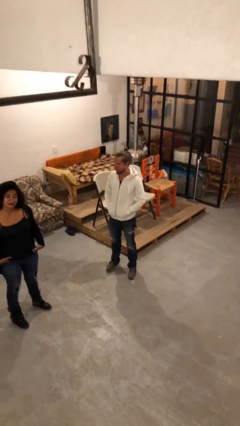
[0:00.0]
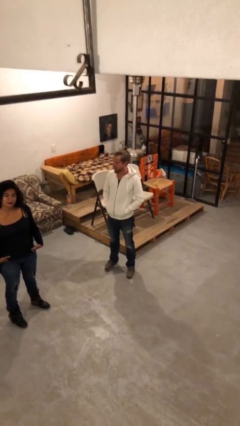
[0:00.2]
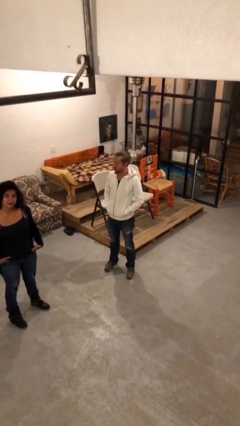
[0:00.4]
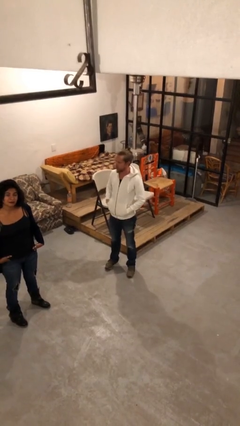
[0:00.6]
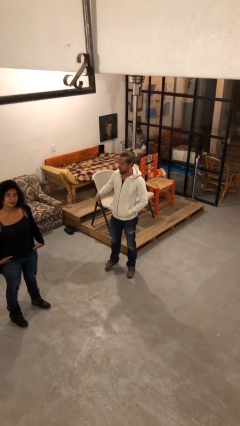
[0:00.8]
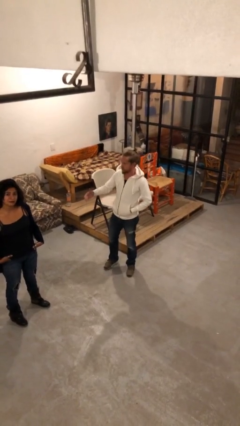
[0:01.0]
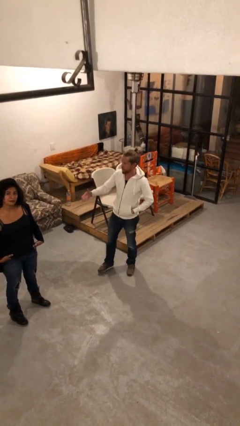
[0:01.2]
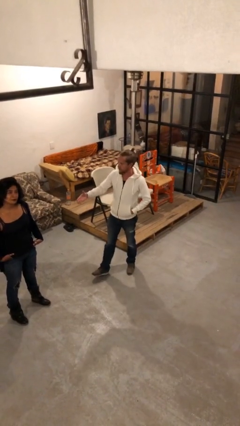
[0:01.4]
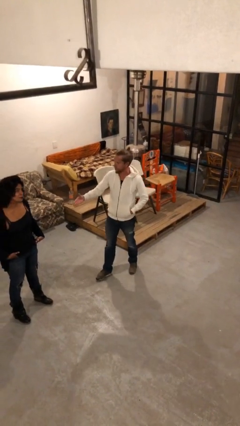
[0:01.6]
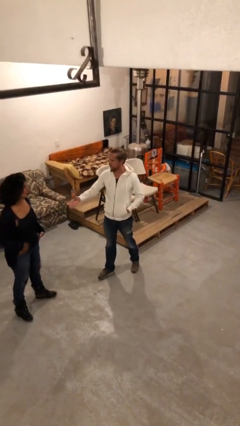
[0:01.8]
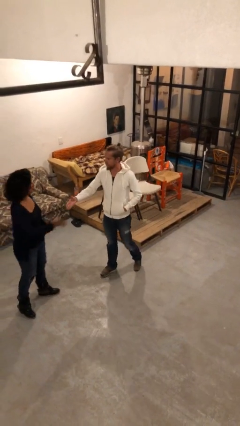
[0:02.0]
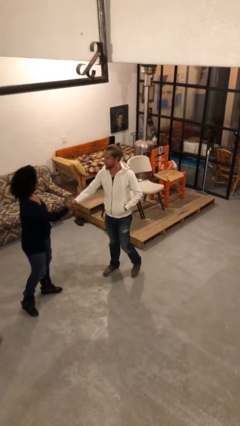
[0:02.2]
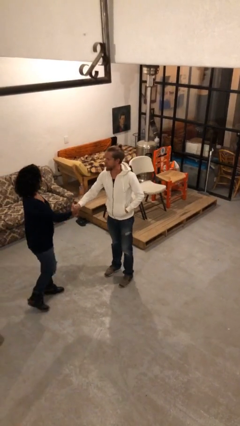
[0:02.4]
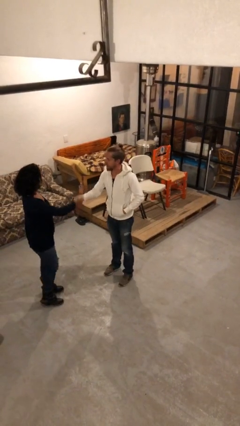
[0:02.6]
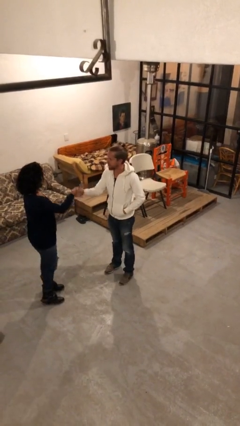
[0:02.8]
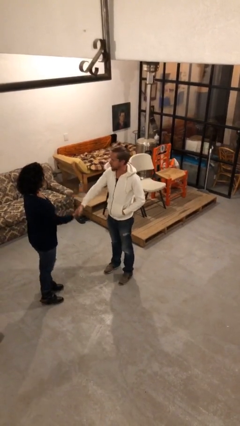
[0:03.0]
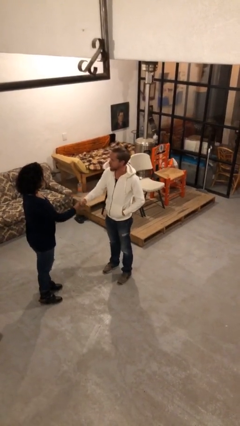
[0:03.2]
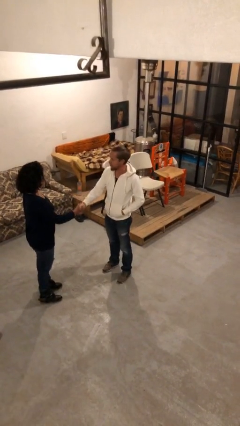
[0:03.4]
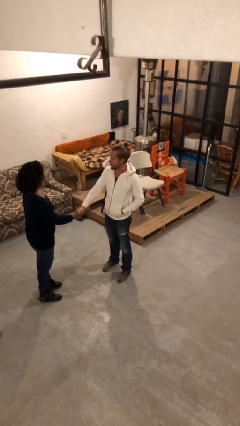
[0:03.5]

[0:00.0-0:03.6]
person shakes hand

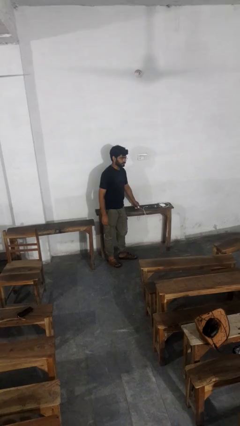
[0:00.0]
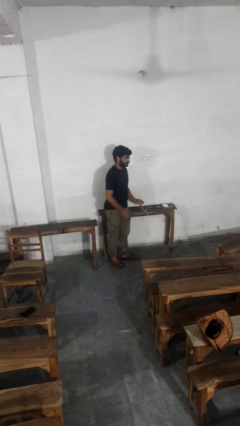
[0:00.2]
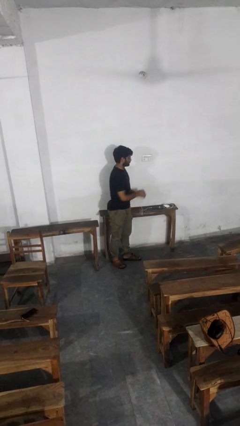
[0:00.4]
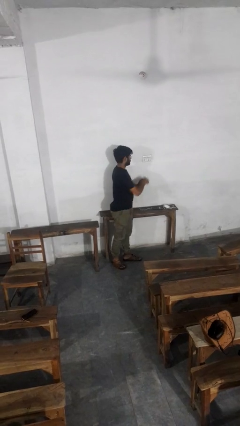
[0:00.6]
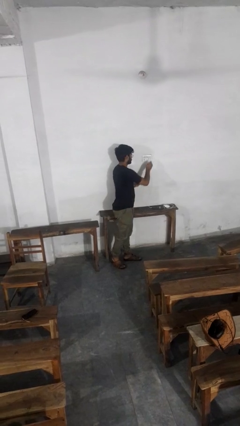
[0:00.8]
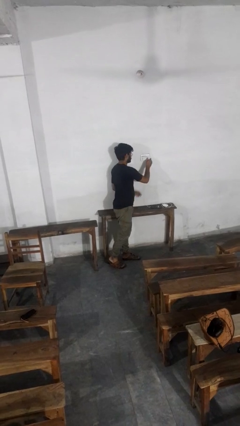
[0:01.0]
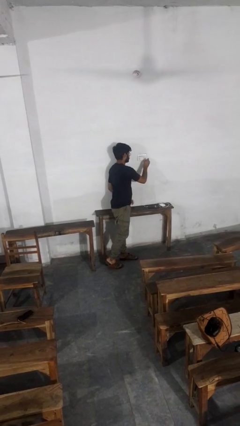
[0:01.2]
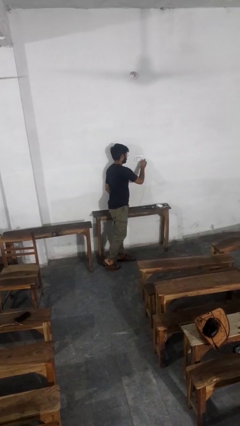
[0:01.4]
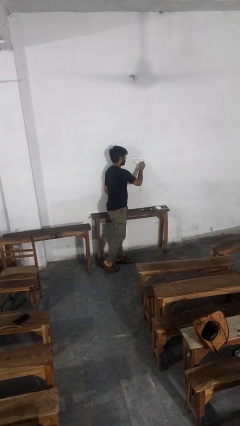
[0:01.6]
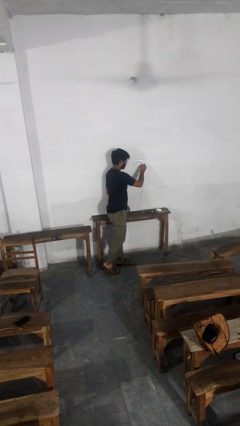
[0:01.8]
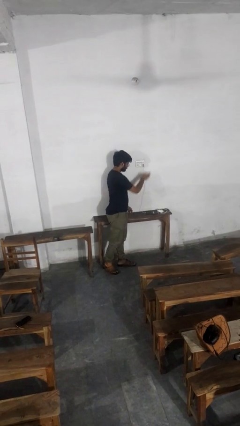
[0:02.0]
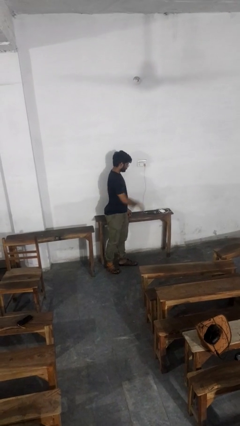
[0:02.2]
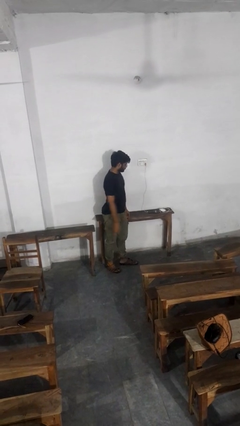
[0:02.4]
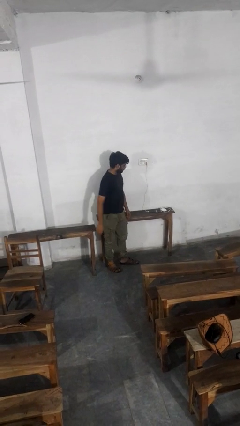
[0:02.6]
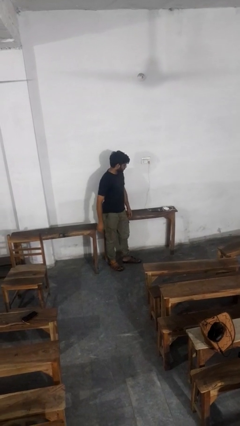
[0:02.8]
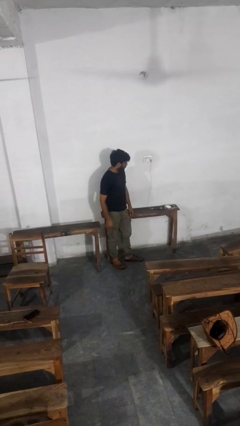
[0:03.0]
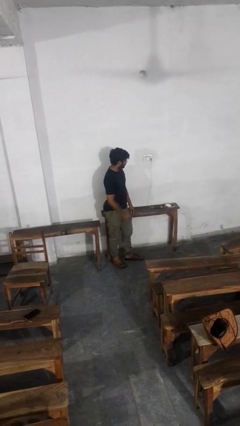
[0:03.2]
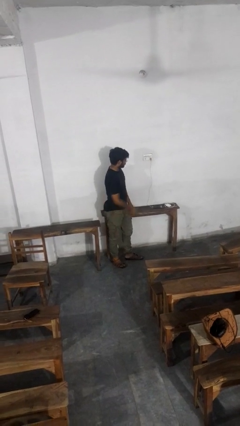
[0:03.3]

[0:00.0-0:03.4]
person plugs into electrical socket

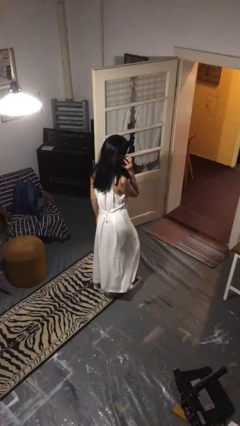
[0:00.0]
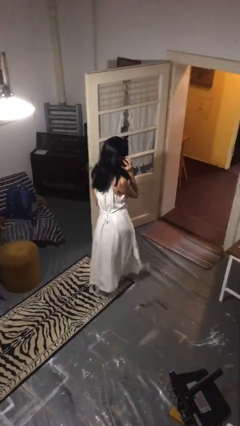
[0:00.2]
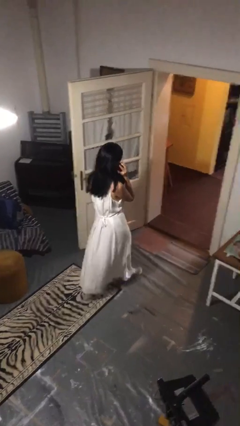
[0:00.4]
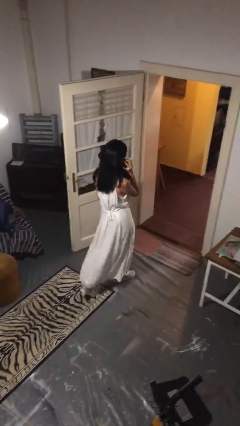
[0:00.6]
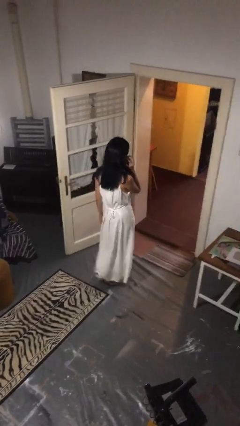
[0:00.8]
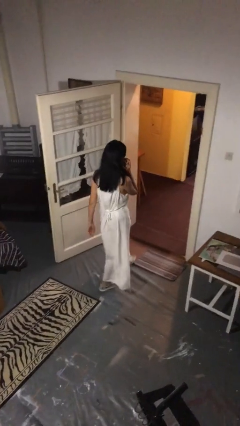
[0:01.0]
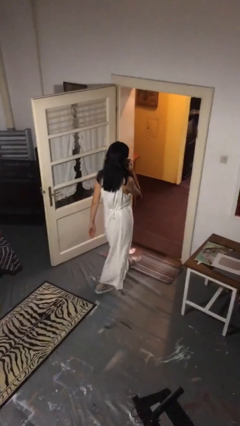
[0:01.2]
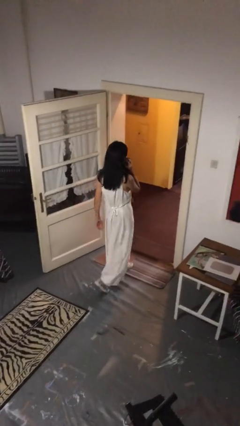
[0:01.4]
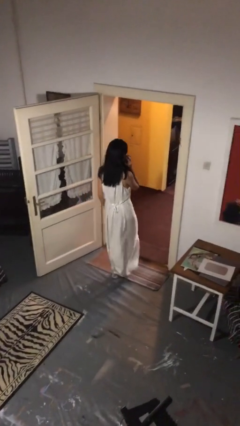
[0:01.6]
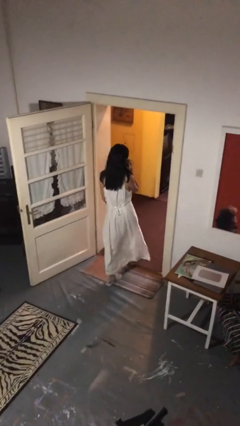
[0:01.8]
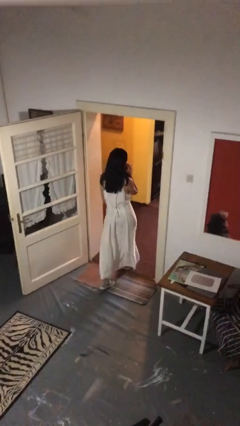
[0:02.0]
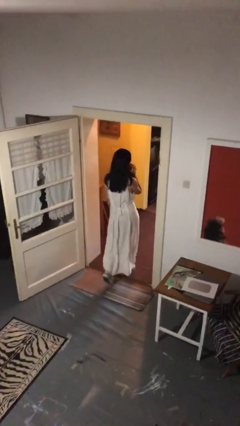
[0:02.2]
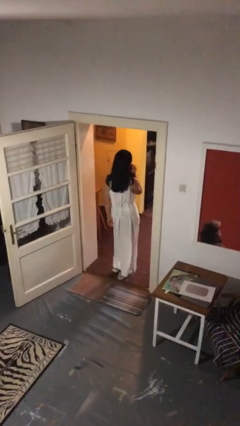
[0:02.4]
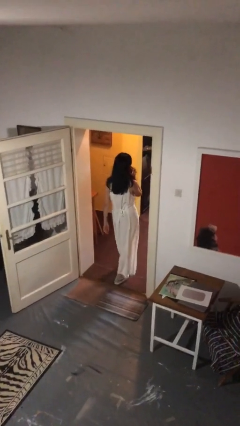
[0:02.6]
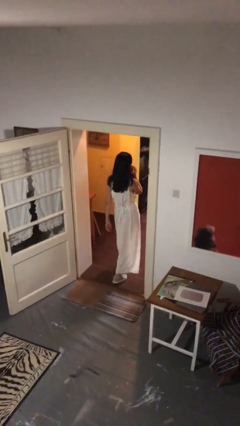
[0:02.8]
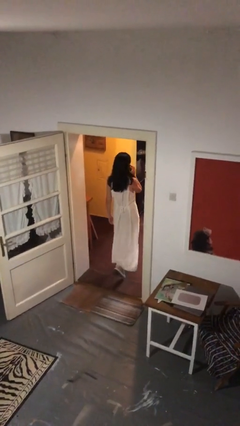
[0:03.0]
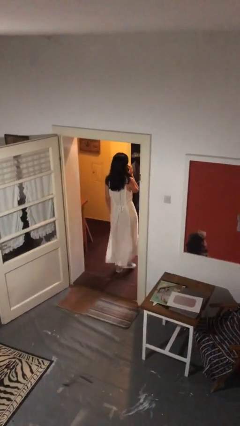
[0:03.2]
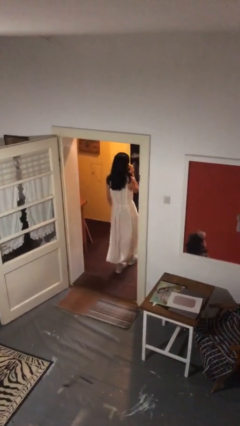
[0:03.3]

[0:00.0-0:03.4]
person exits scene through structure

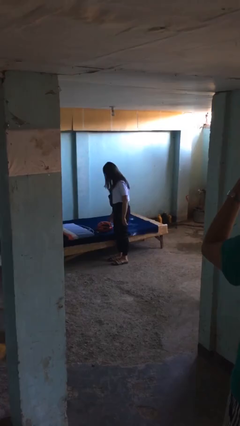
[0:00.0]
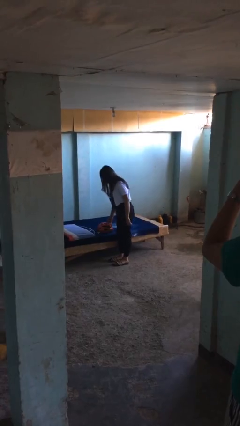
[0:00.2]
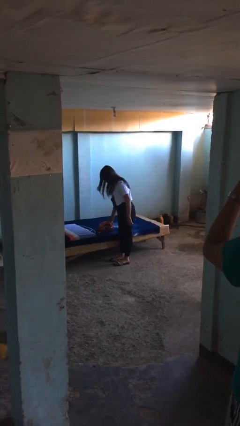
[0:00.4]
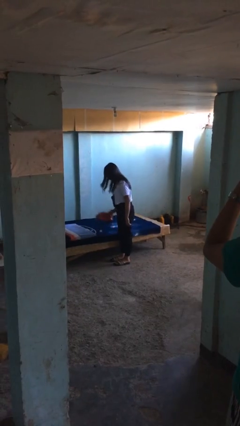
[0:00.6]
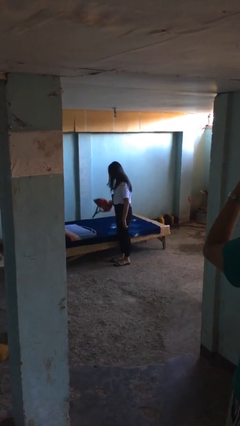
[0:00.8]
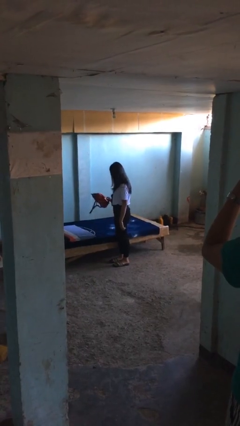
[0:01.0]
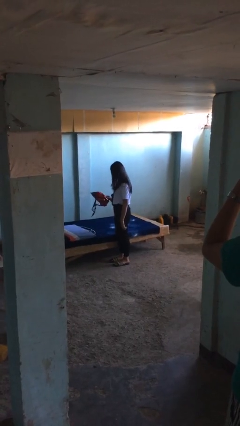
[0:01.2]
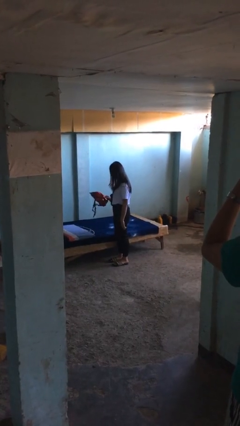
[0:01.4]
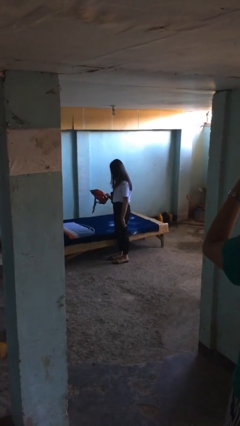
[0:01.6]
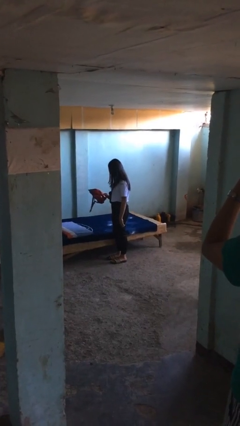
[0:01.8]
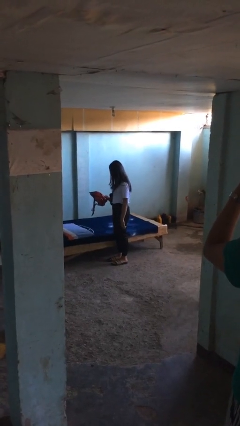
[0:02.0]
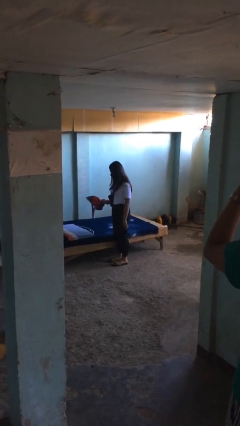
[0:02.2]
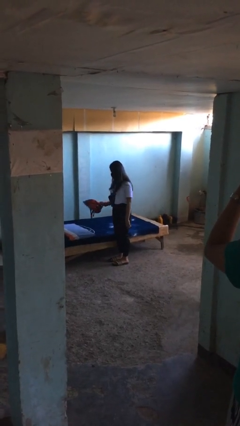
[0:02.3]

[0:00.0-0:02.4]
person picks up object from bed

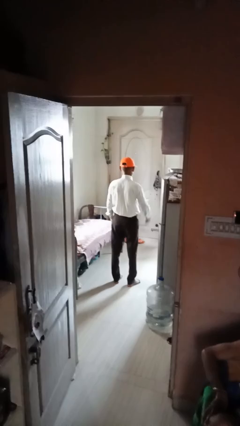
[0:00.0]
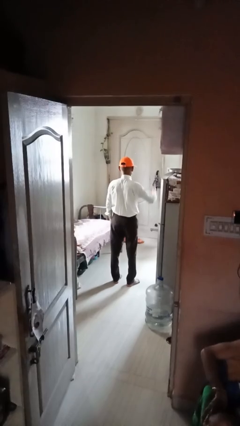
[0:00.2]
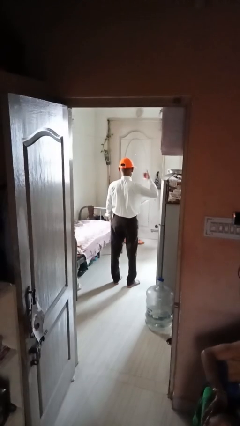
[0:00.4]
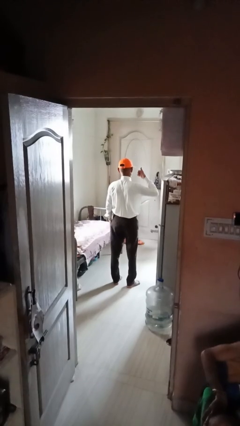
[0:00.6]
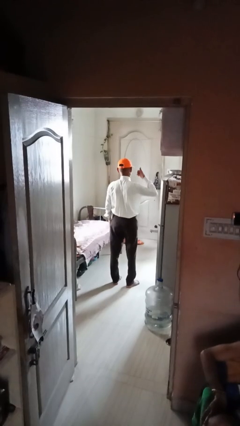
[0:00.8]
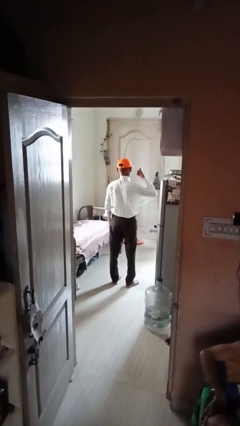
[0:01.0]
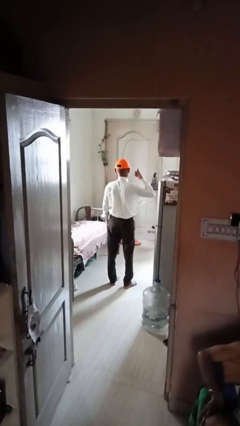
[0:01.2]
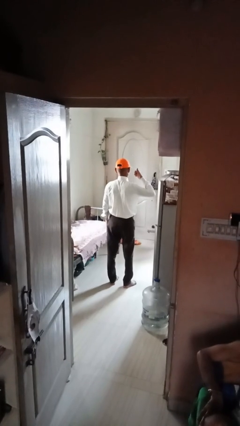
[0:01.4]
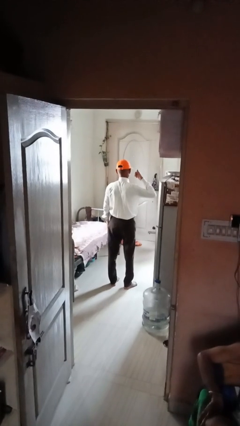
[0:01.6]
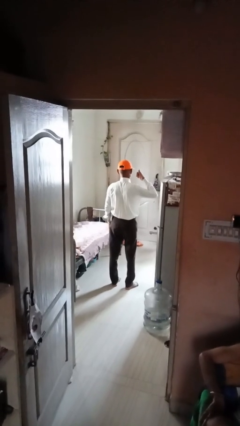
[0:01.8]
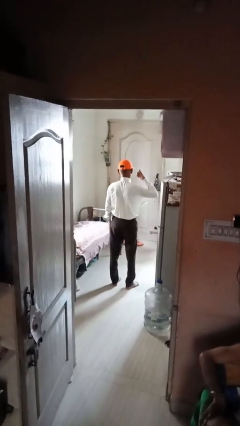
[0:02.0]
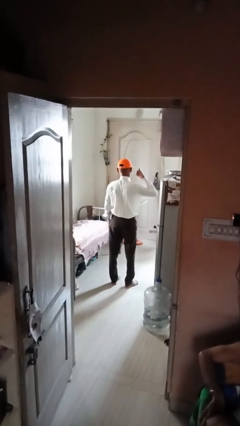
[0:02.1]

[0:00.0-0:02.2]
person gestures call me

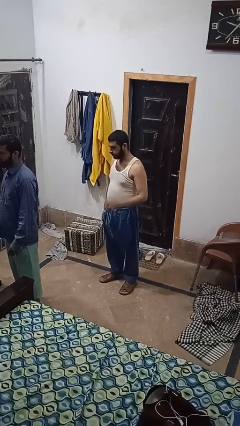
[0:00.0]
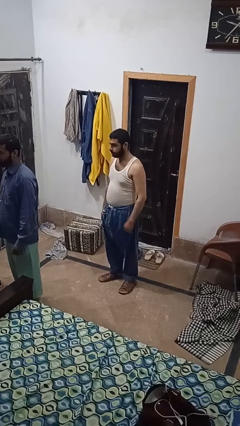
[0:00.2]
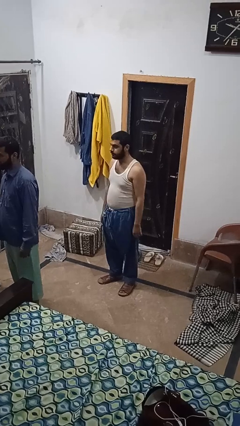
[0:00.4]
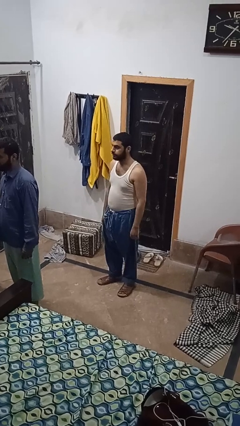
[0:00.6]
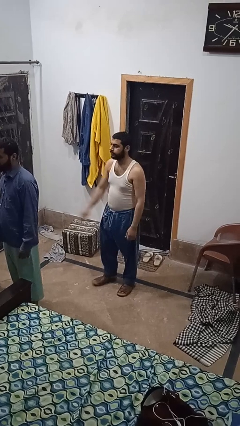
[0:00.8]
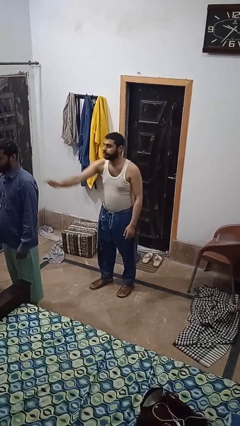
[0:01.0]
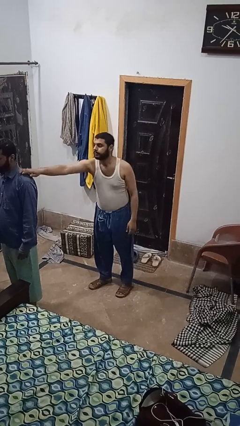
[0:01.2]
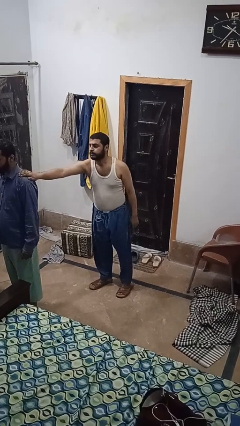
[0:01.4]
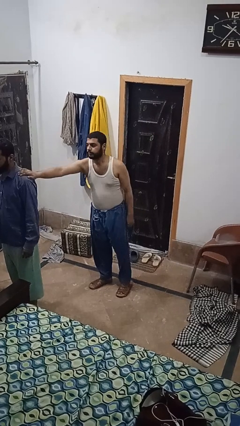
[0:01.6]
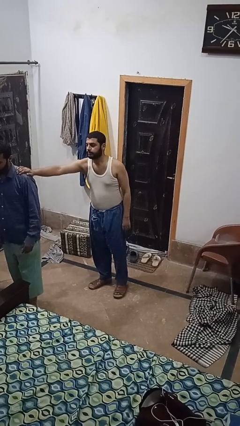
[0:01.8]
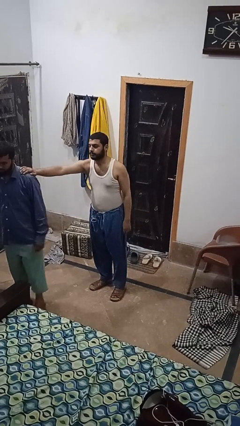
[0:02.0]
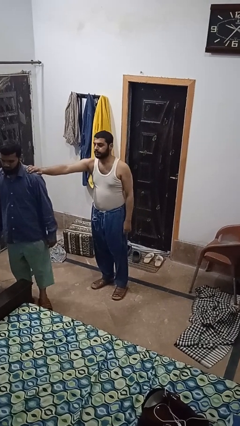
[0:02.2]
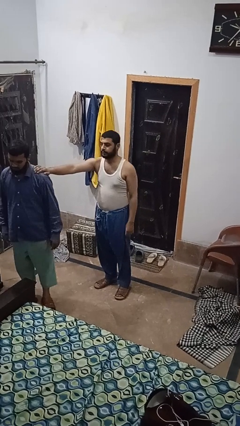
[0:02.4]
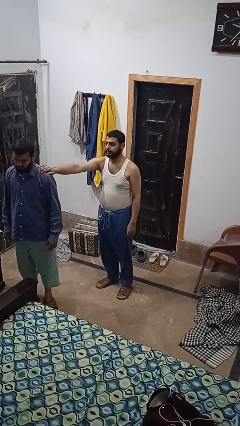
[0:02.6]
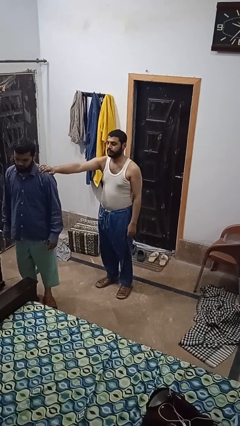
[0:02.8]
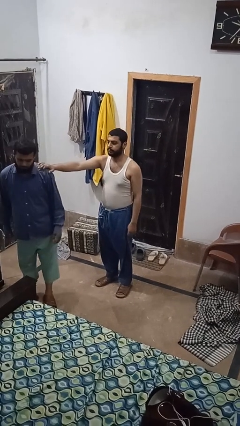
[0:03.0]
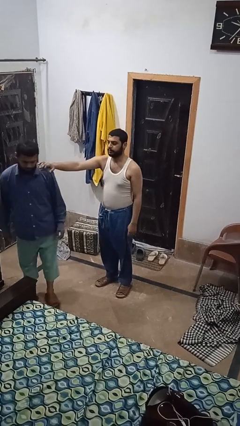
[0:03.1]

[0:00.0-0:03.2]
person grabs person by shoulder
